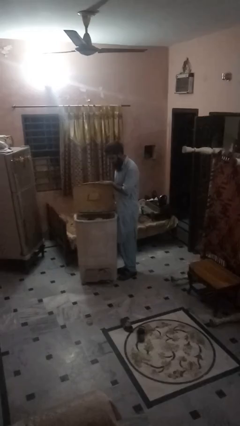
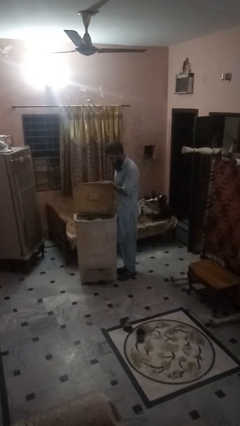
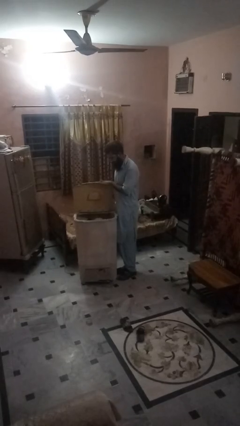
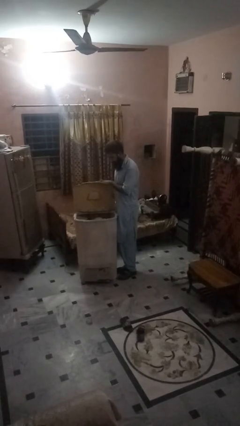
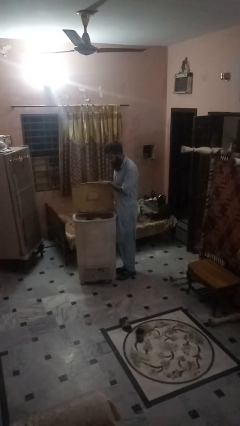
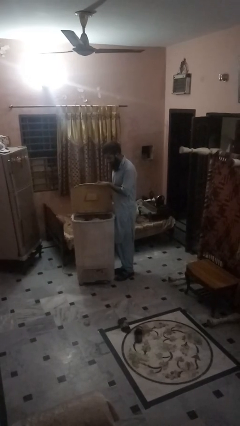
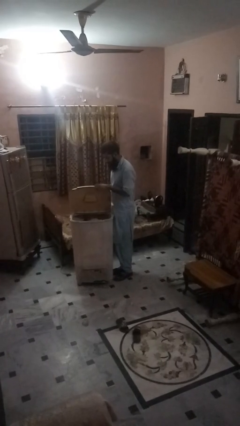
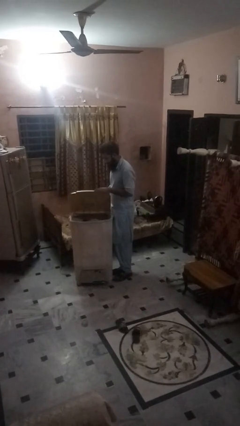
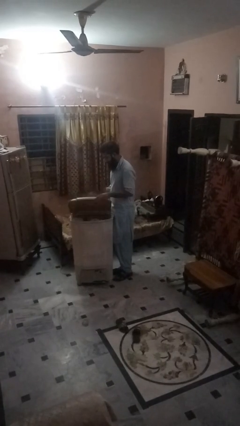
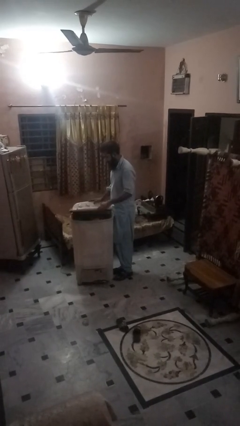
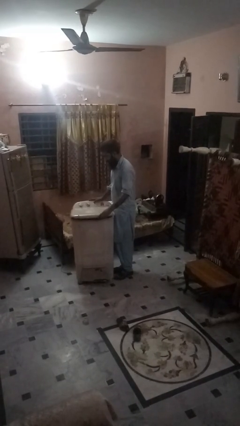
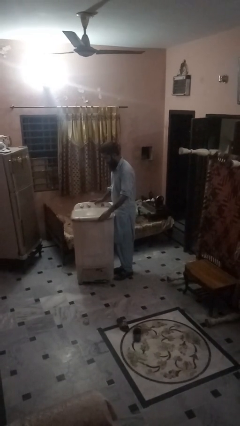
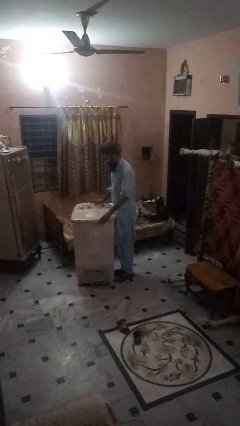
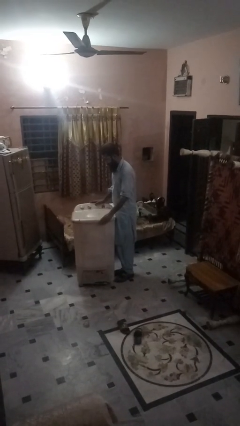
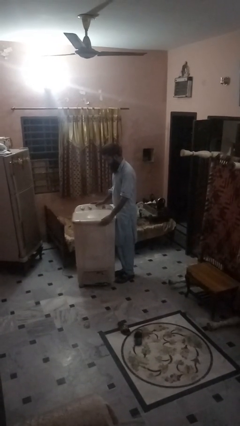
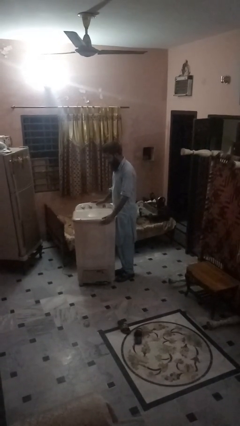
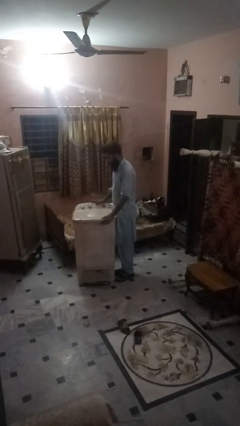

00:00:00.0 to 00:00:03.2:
person closes clothes washer

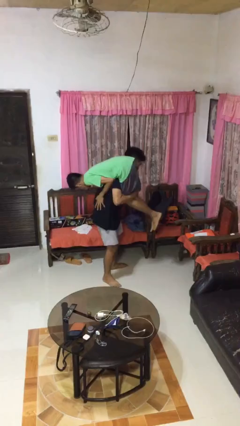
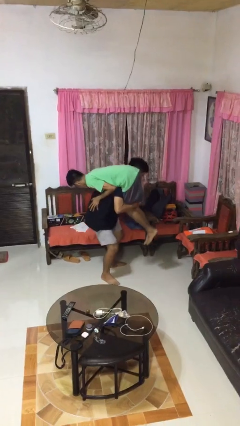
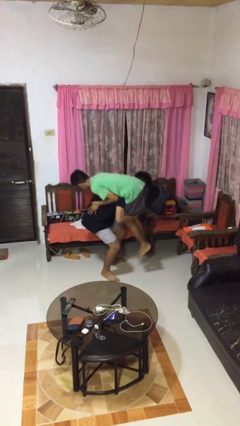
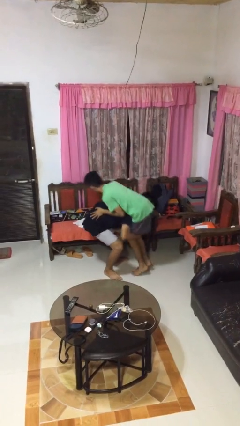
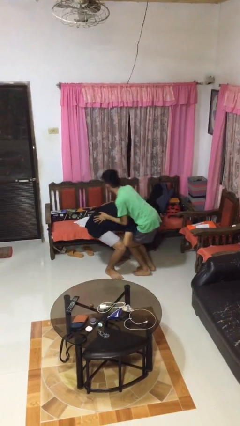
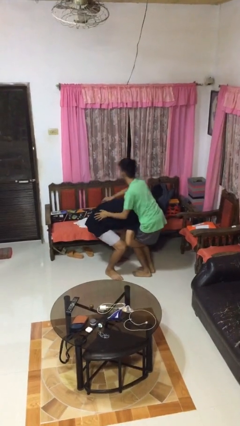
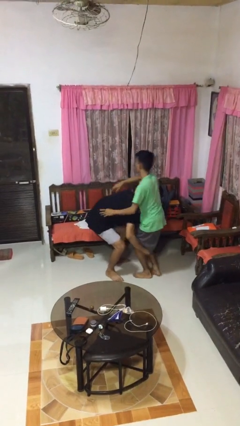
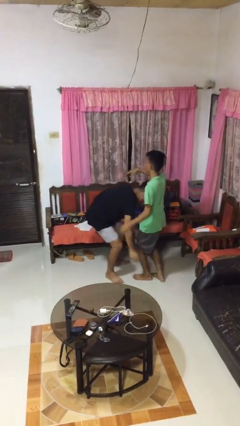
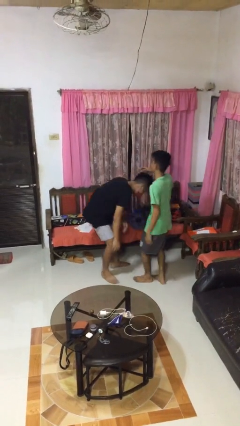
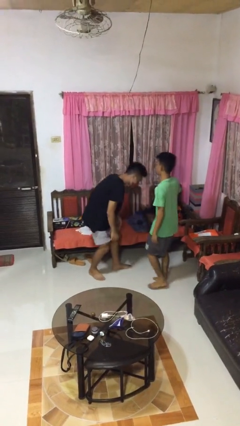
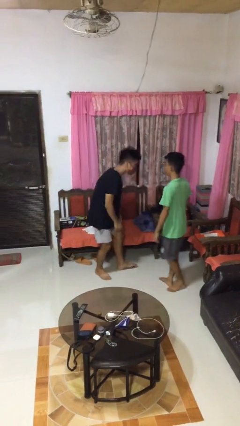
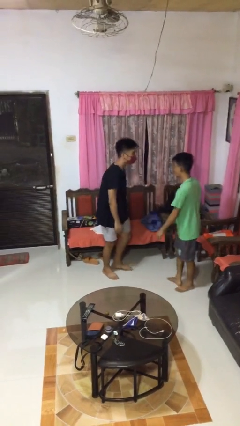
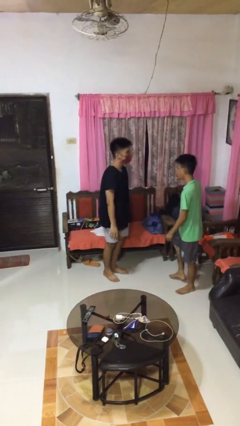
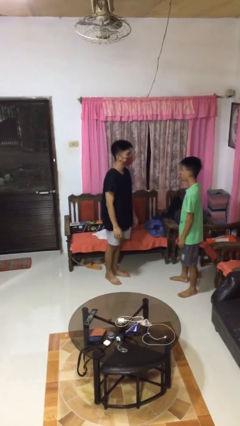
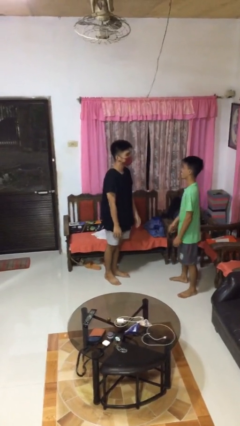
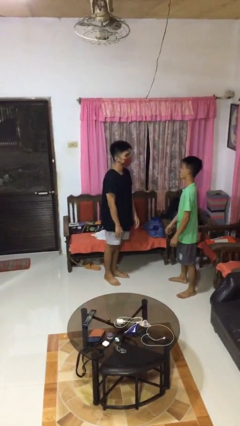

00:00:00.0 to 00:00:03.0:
person puts down person

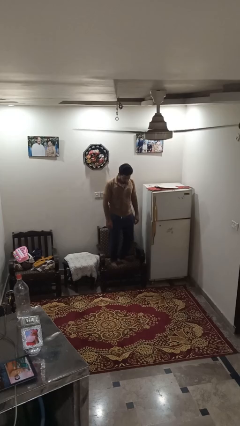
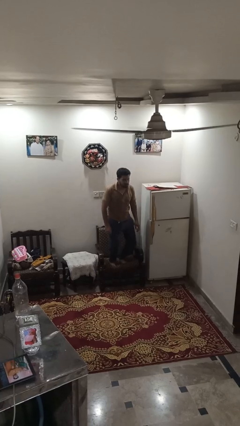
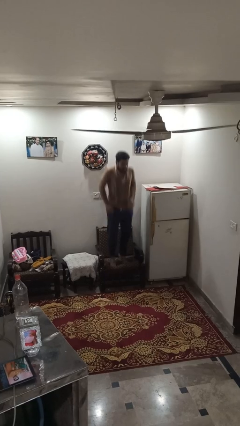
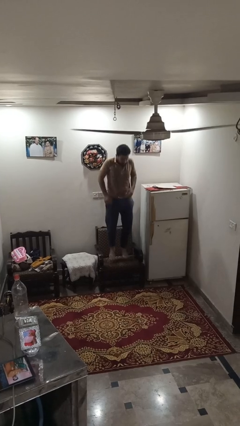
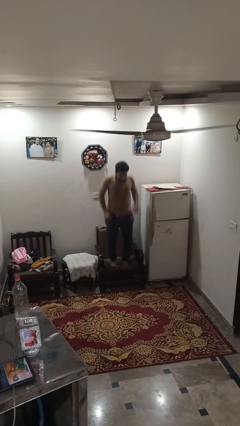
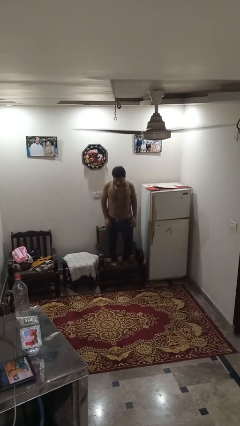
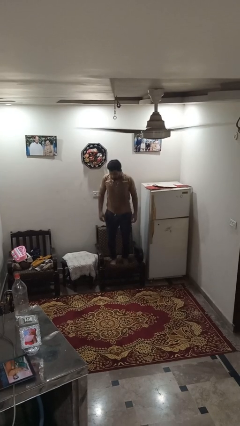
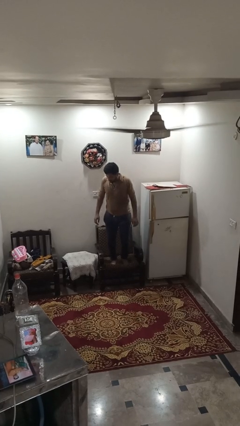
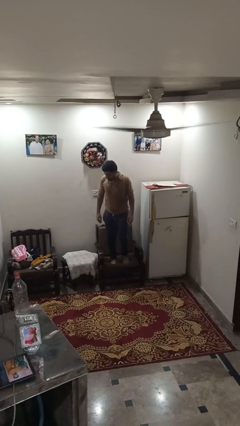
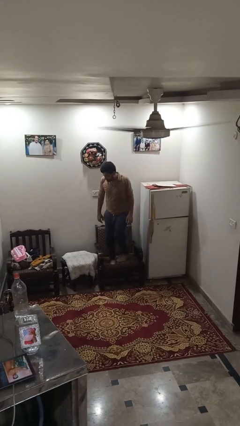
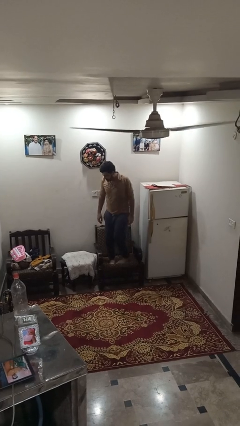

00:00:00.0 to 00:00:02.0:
person jumps on couch

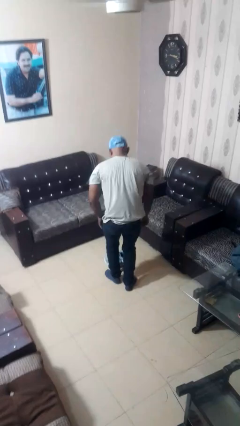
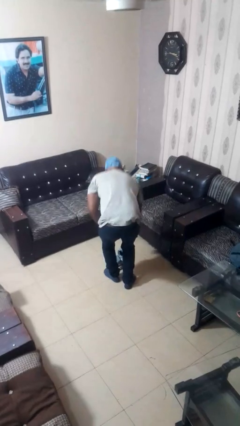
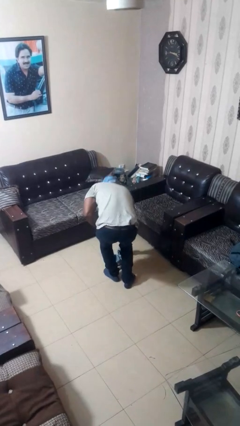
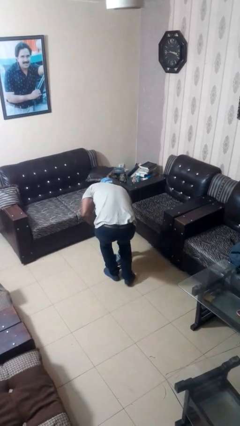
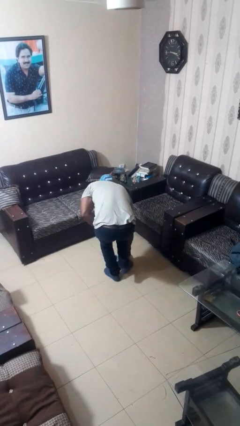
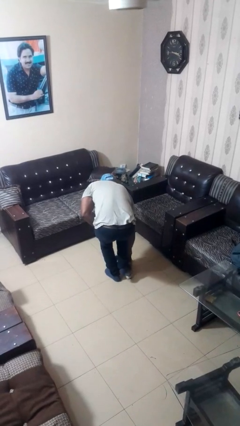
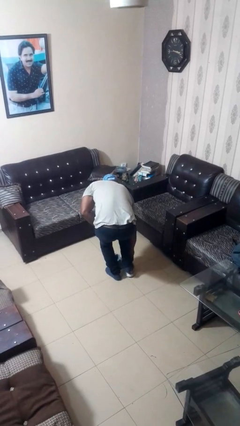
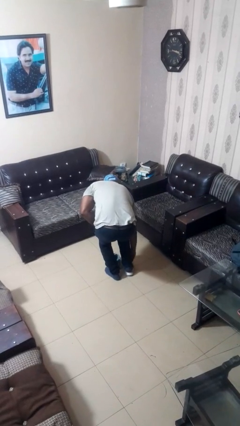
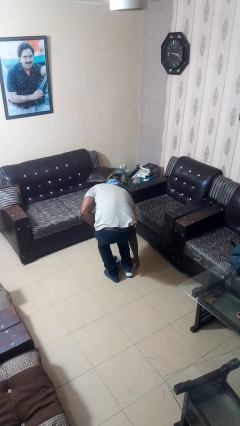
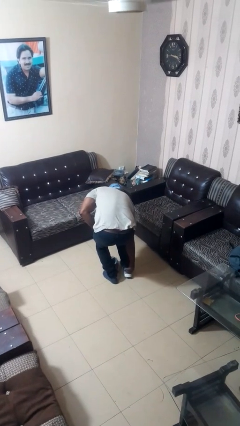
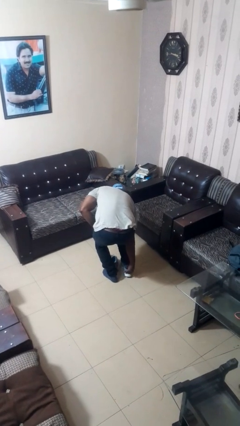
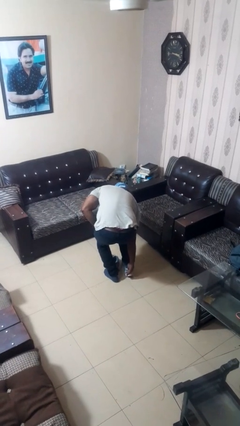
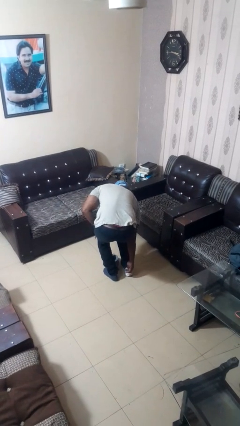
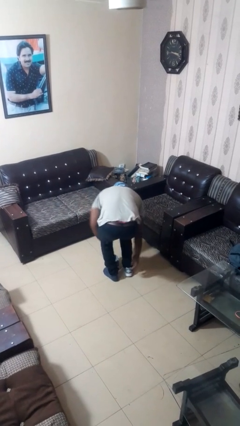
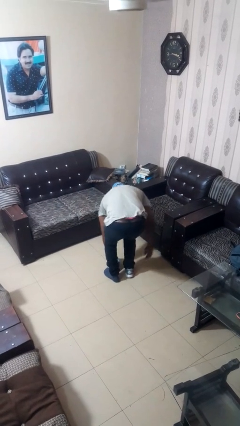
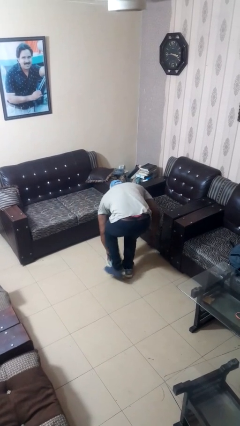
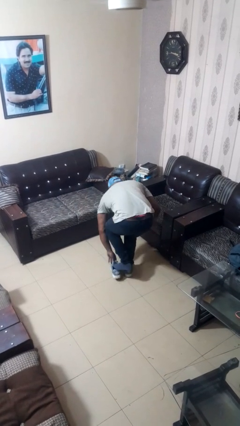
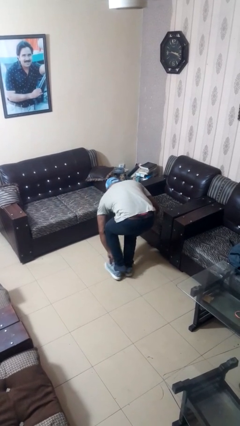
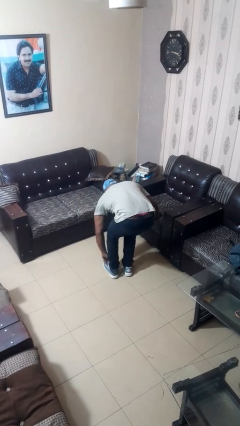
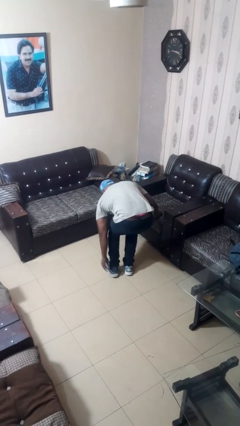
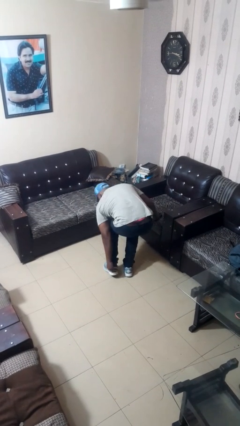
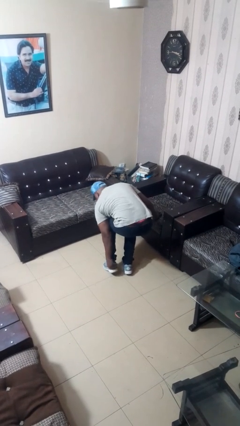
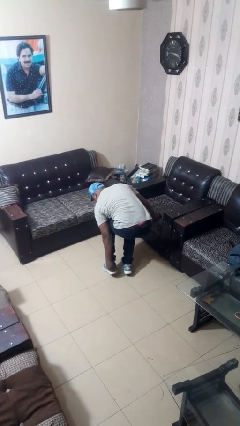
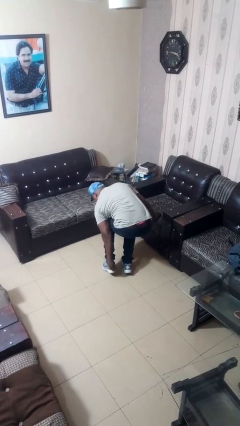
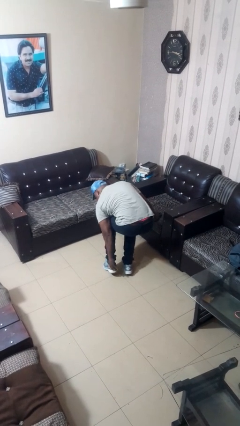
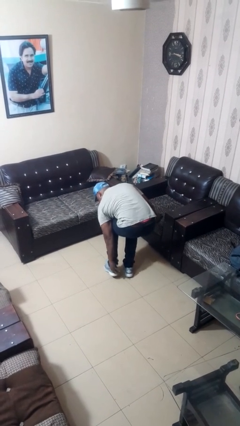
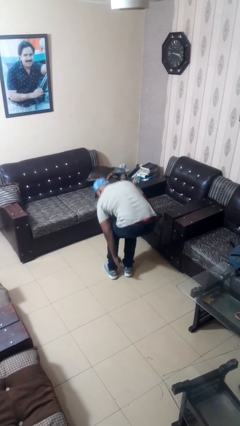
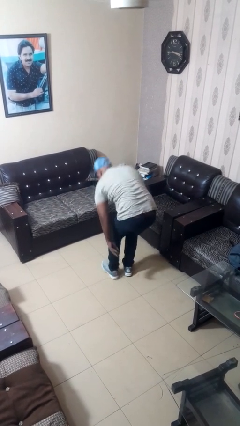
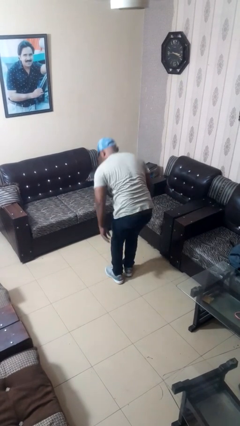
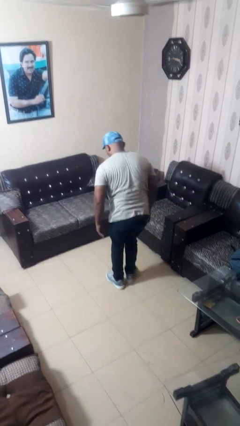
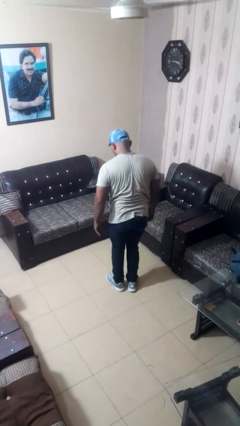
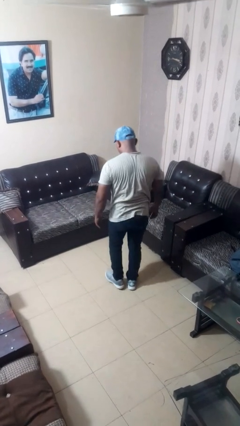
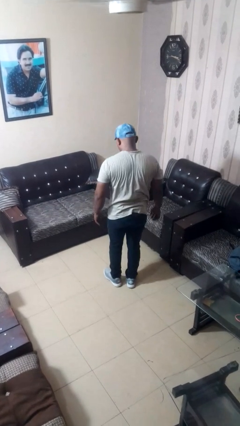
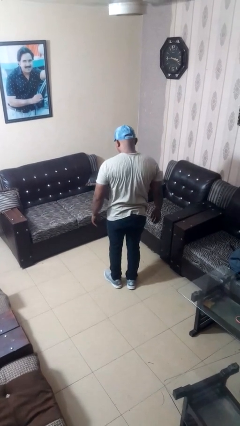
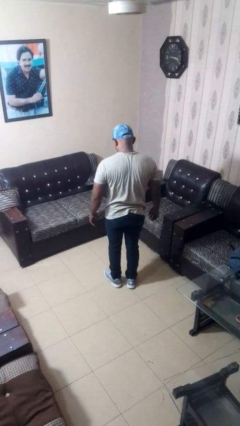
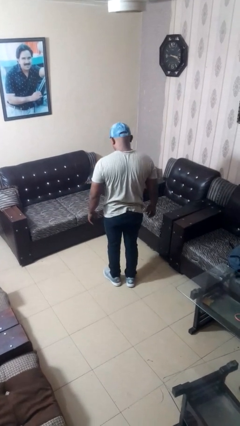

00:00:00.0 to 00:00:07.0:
person puts on shoes

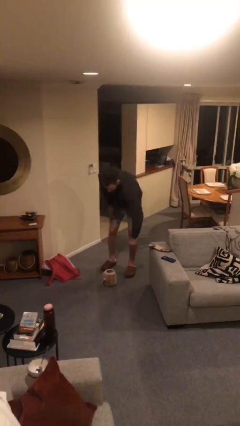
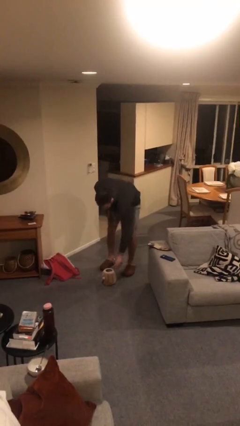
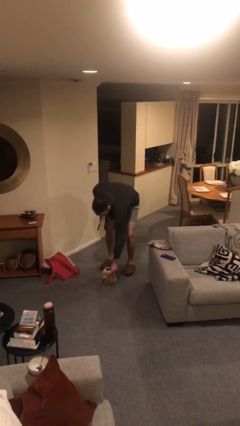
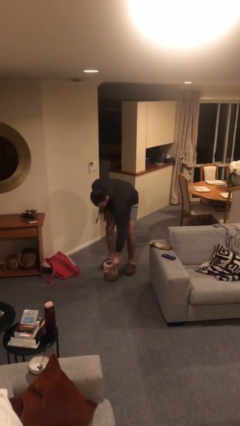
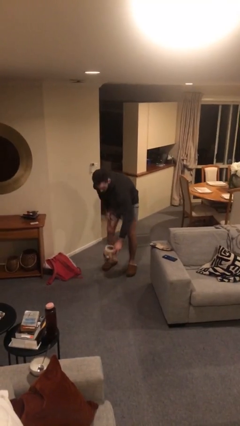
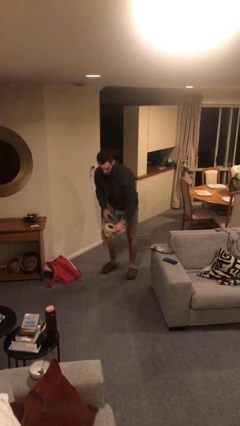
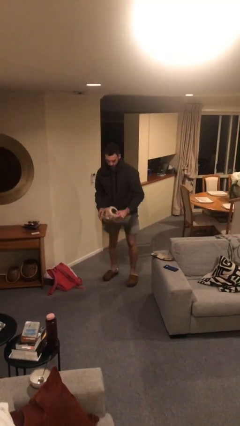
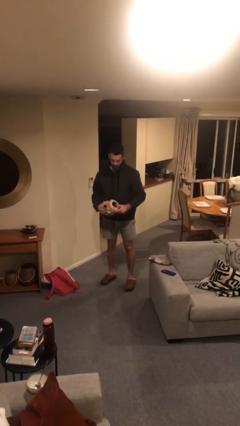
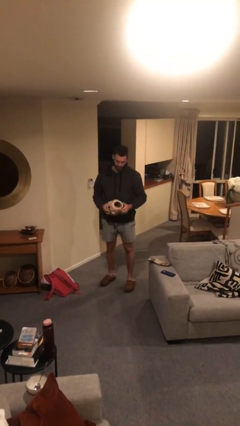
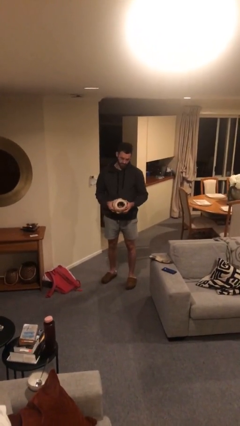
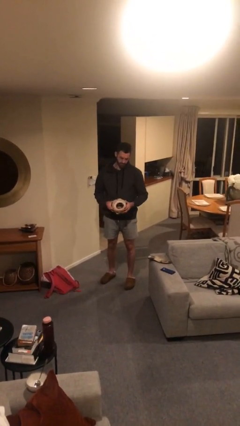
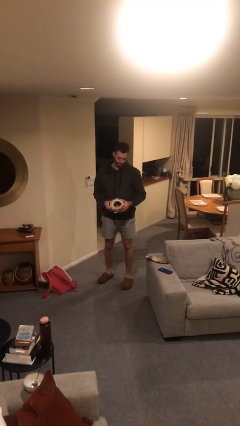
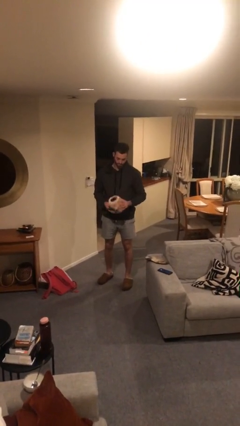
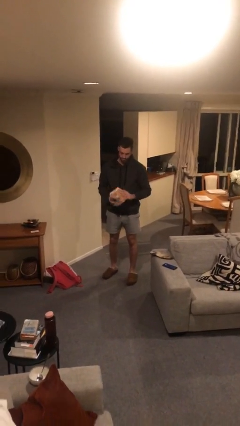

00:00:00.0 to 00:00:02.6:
person picks up object from floor
